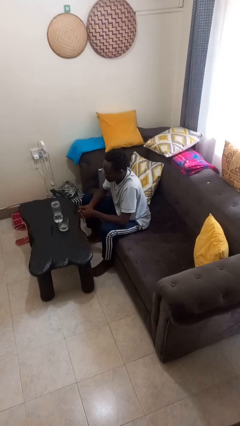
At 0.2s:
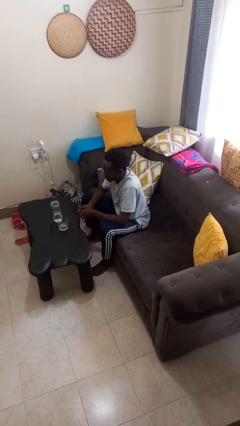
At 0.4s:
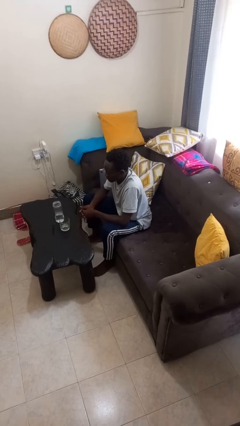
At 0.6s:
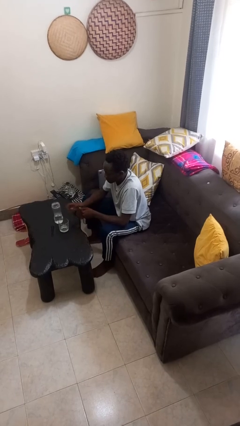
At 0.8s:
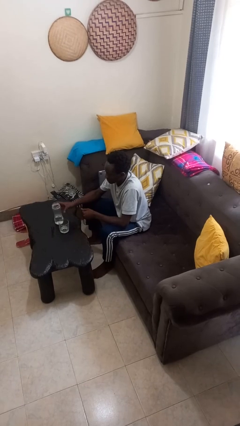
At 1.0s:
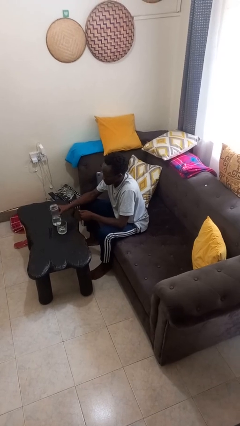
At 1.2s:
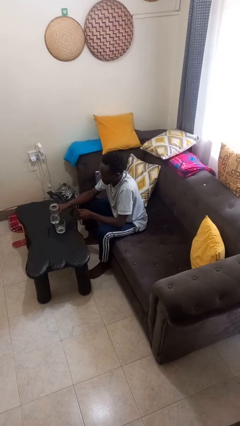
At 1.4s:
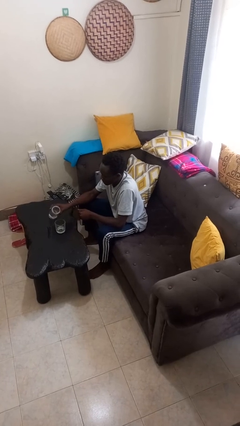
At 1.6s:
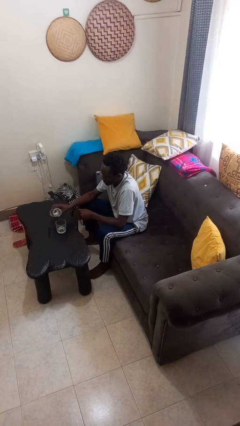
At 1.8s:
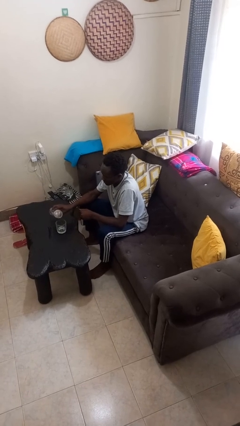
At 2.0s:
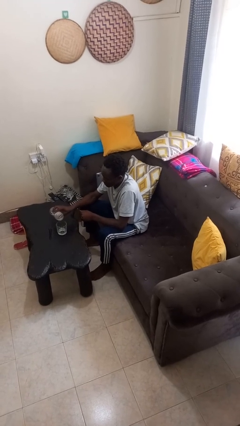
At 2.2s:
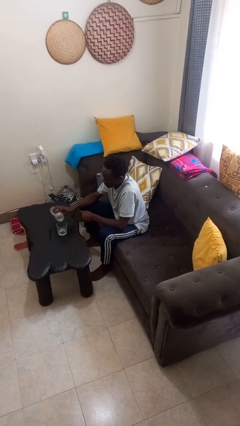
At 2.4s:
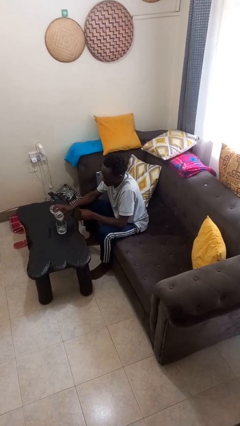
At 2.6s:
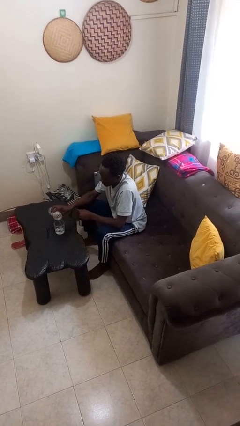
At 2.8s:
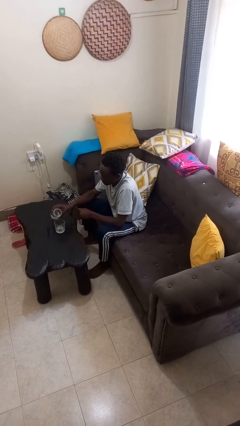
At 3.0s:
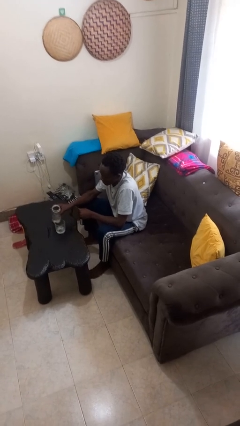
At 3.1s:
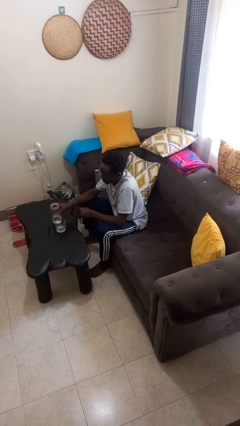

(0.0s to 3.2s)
person pours liquid into cup

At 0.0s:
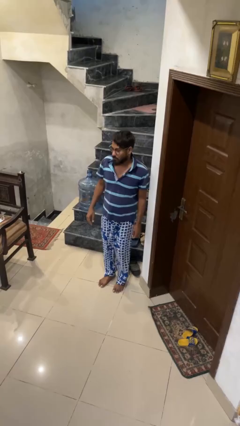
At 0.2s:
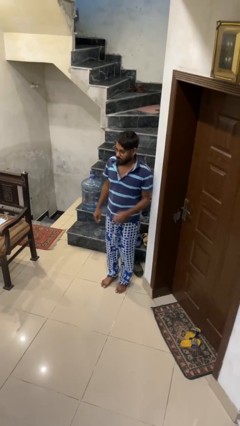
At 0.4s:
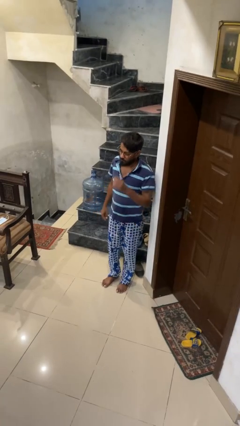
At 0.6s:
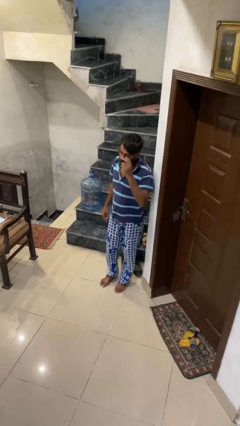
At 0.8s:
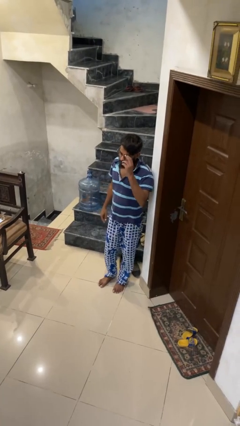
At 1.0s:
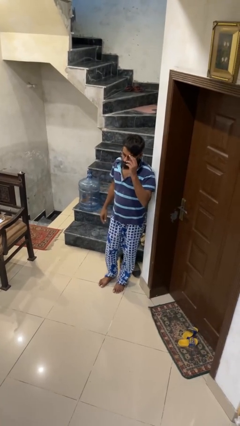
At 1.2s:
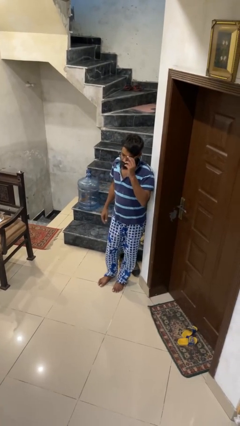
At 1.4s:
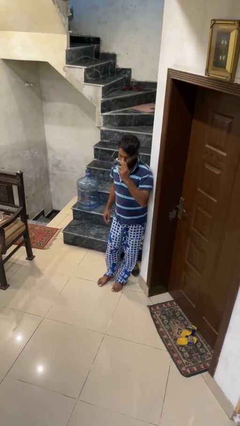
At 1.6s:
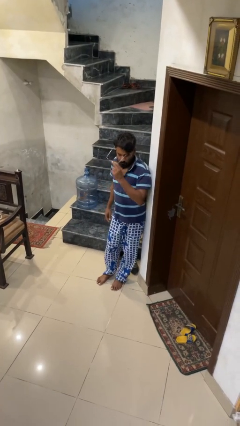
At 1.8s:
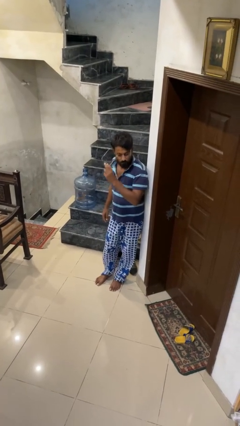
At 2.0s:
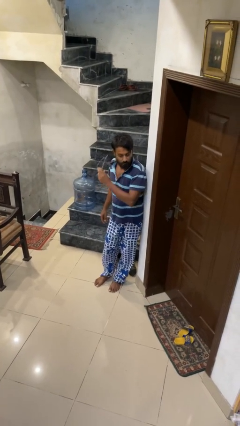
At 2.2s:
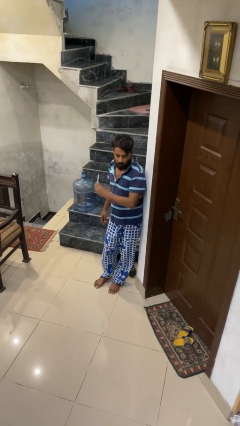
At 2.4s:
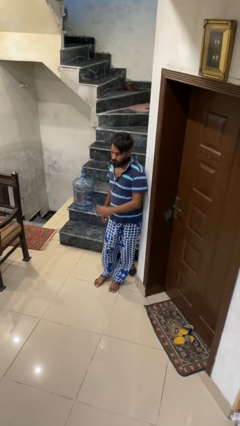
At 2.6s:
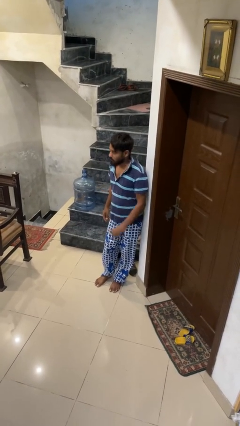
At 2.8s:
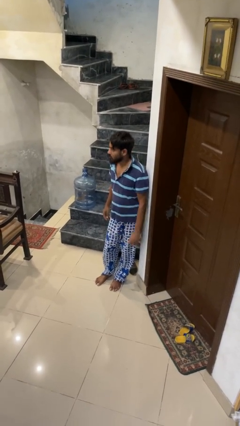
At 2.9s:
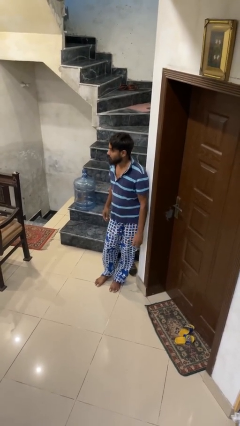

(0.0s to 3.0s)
person takes off glasses

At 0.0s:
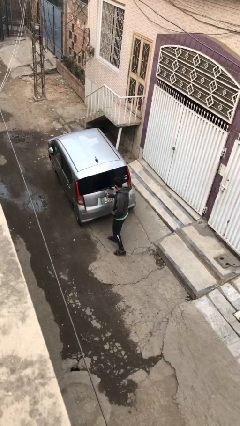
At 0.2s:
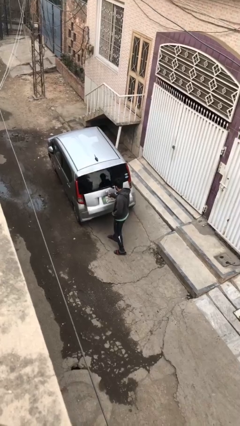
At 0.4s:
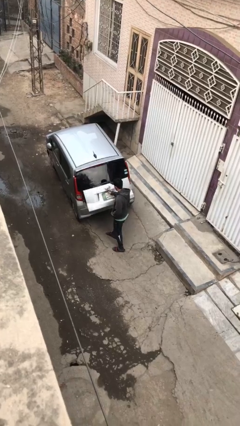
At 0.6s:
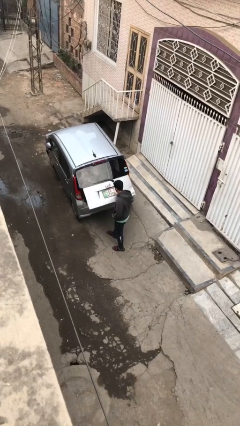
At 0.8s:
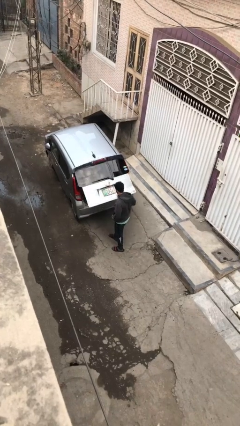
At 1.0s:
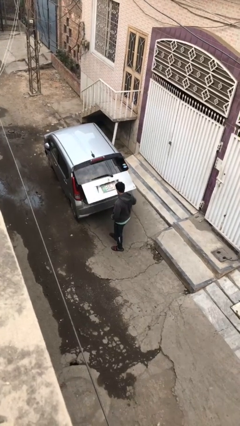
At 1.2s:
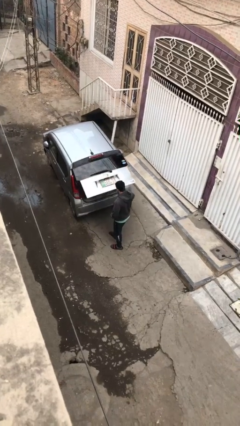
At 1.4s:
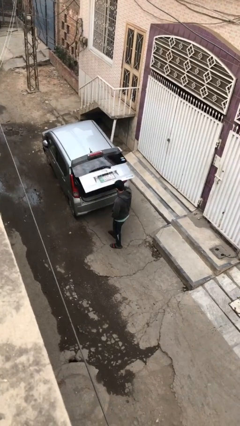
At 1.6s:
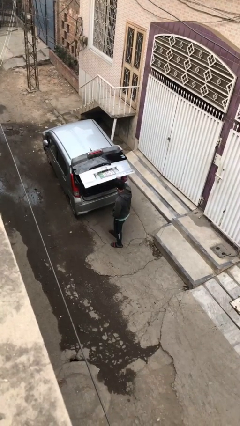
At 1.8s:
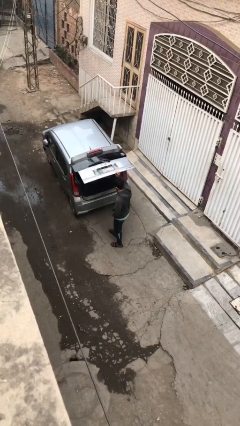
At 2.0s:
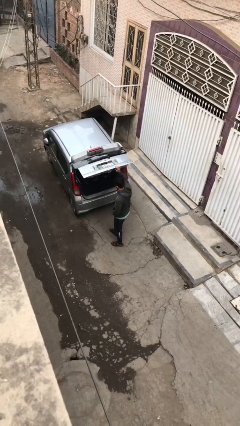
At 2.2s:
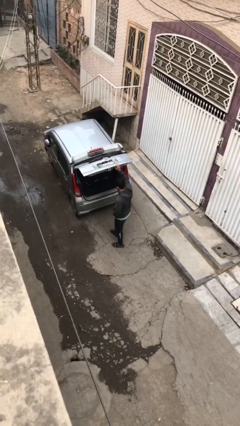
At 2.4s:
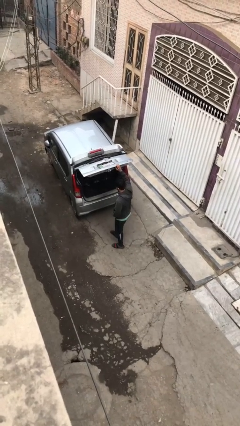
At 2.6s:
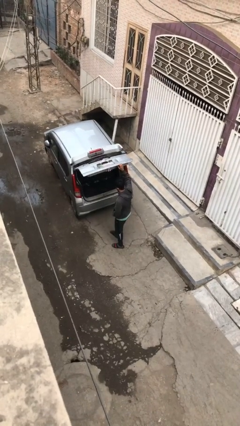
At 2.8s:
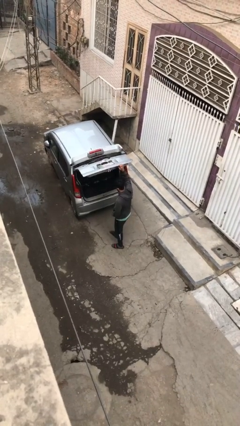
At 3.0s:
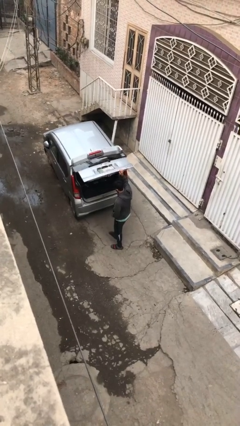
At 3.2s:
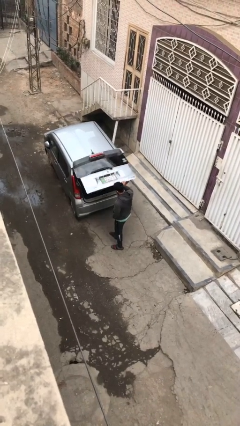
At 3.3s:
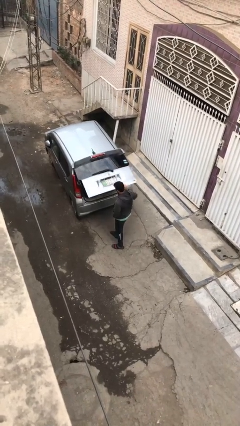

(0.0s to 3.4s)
person opens car trunk

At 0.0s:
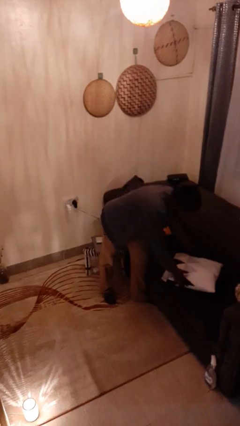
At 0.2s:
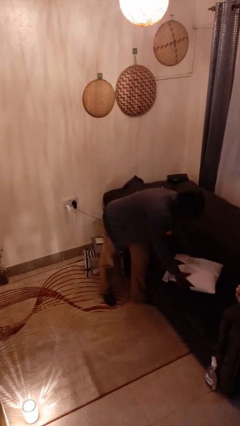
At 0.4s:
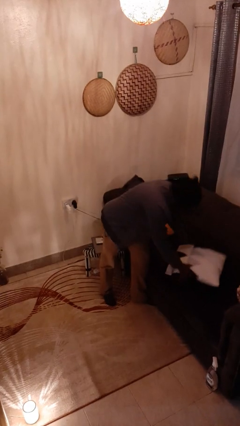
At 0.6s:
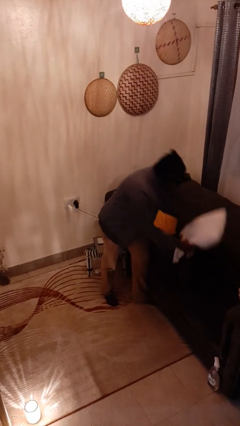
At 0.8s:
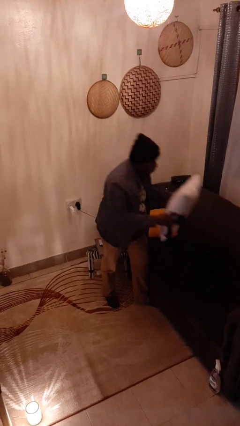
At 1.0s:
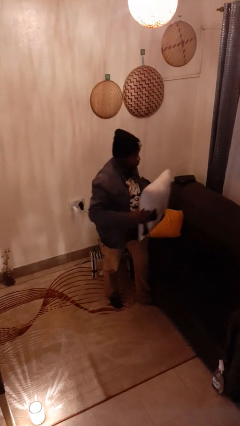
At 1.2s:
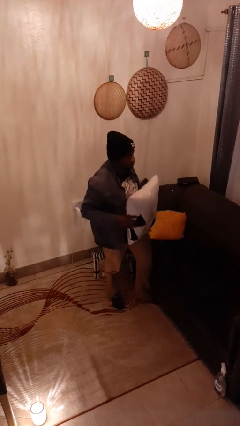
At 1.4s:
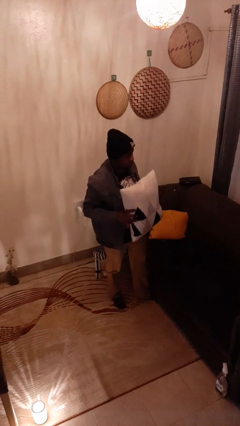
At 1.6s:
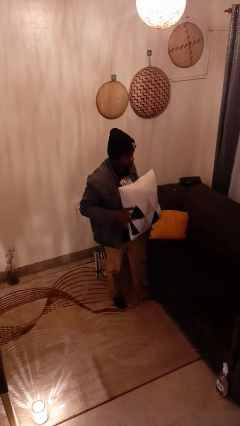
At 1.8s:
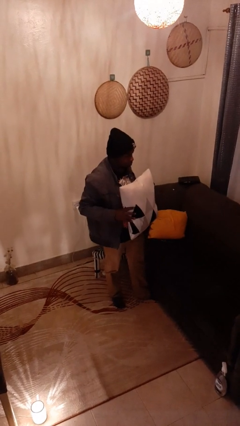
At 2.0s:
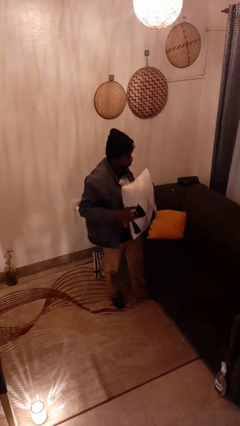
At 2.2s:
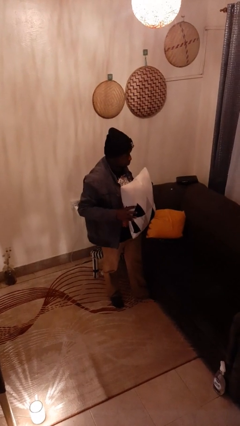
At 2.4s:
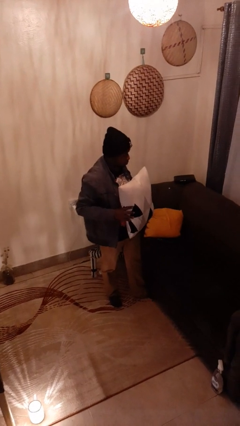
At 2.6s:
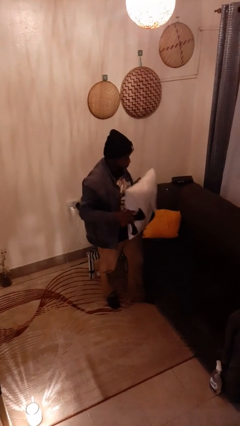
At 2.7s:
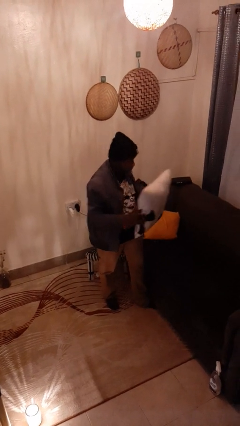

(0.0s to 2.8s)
person picks up object from couch

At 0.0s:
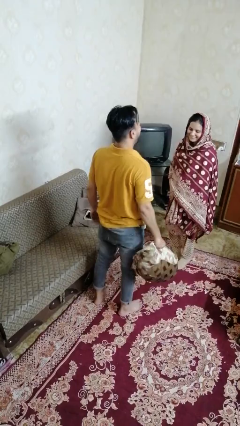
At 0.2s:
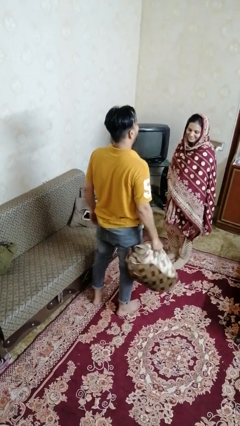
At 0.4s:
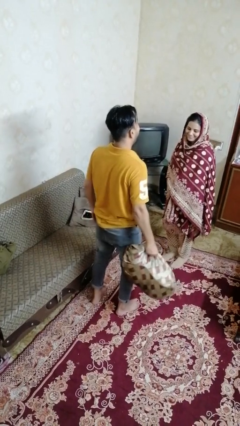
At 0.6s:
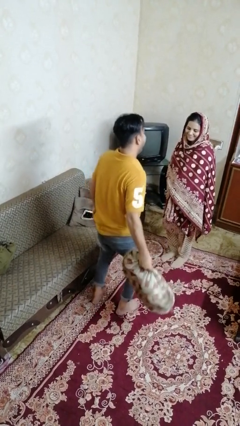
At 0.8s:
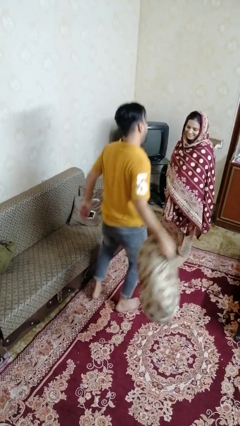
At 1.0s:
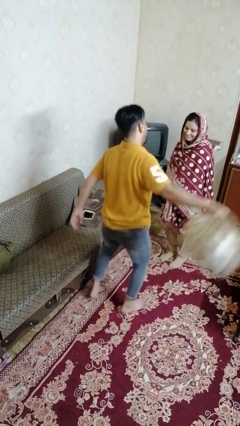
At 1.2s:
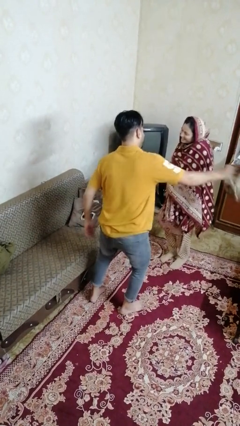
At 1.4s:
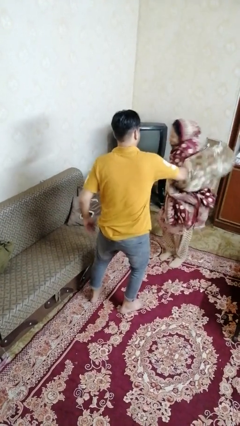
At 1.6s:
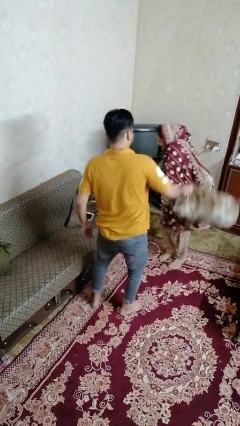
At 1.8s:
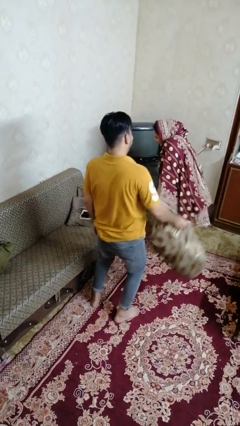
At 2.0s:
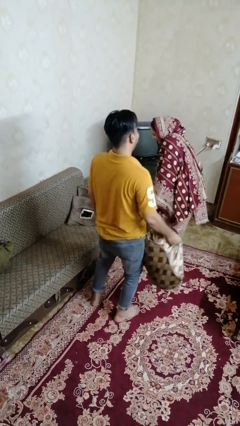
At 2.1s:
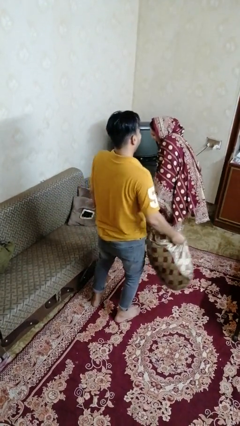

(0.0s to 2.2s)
person hits person with pillow

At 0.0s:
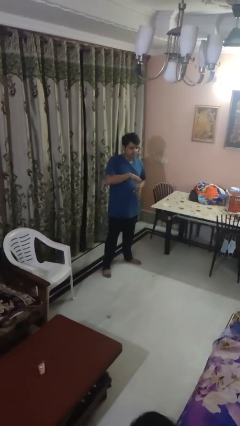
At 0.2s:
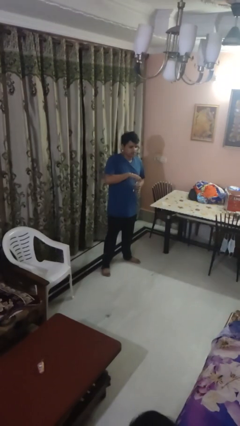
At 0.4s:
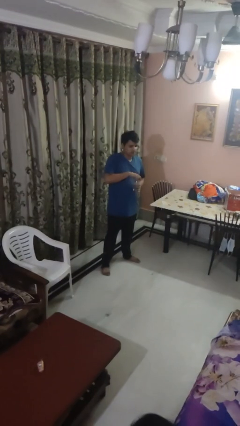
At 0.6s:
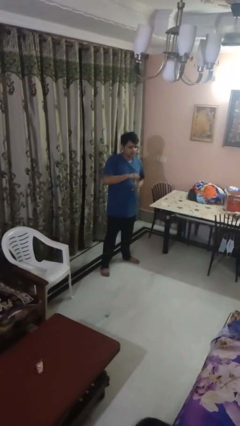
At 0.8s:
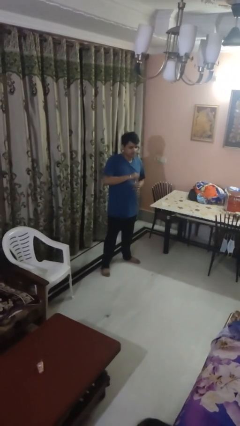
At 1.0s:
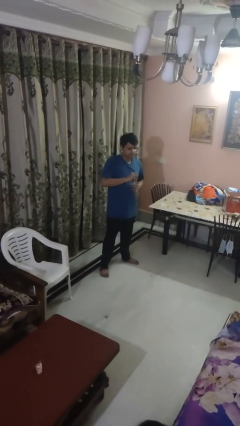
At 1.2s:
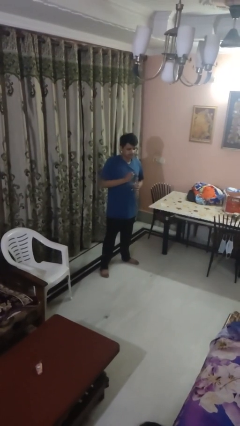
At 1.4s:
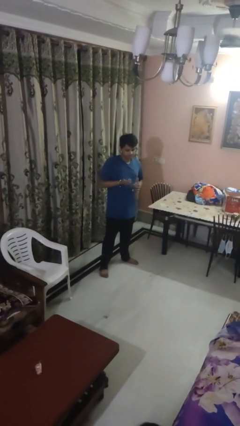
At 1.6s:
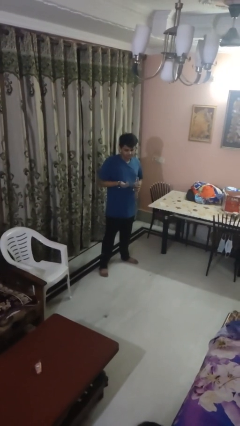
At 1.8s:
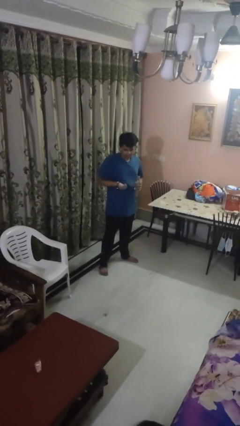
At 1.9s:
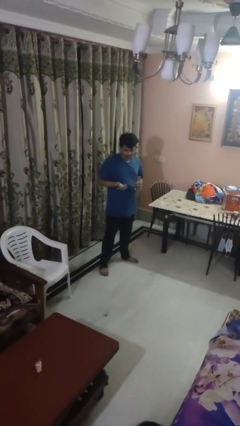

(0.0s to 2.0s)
person unscrews lid from bottle

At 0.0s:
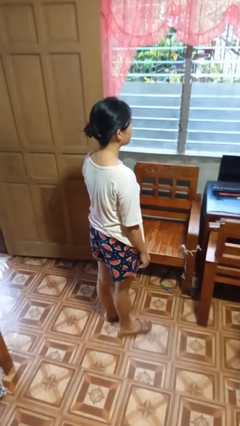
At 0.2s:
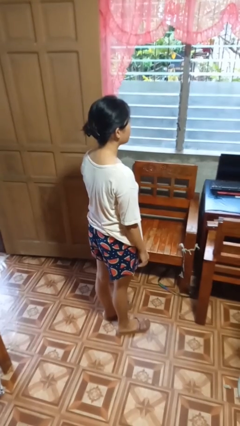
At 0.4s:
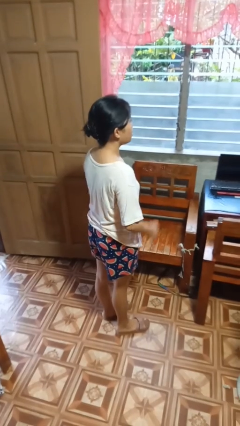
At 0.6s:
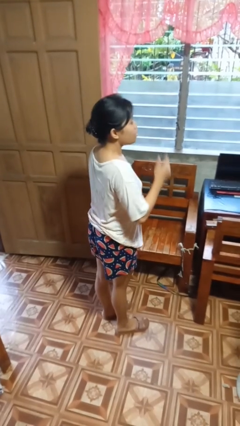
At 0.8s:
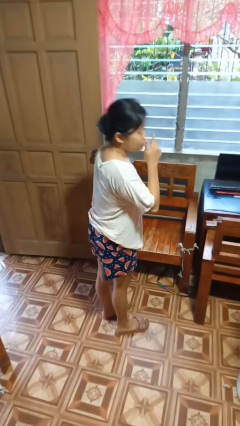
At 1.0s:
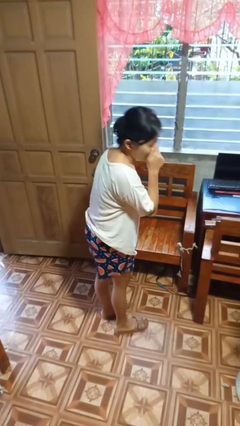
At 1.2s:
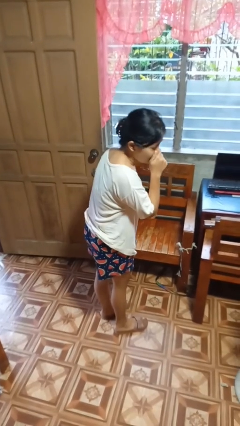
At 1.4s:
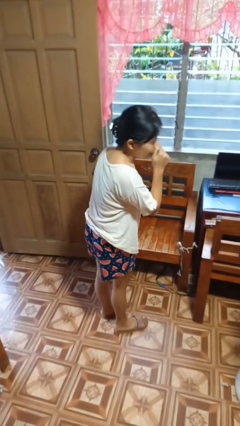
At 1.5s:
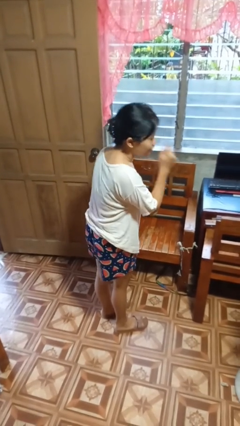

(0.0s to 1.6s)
person sneezes into hand
